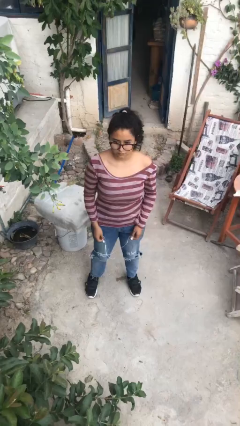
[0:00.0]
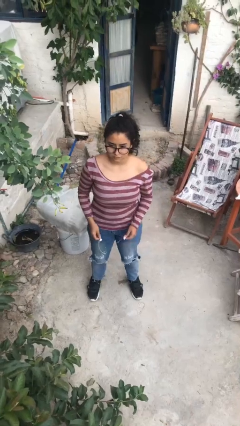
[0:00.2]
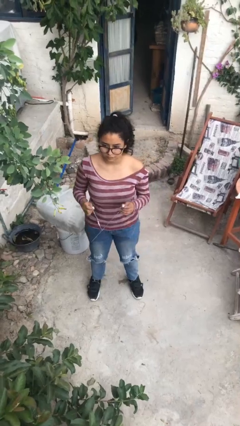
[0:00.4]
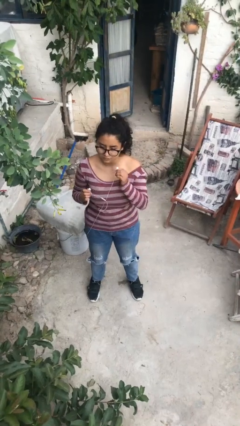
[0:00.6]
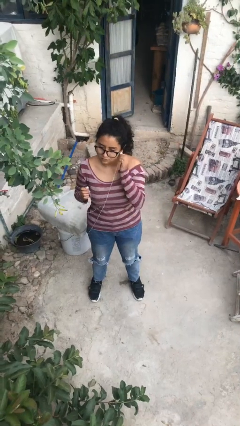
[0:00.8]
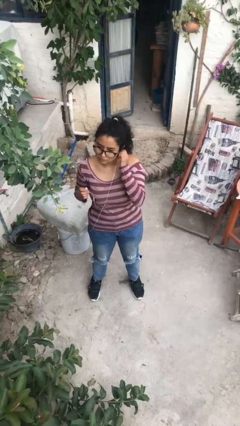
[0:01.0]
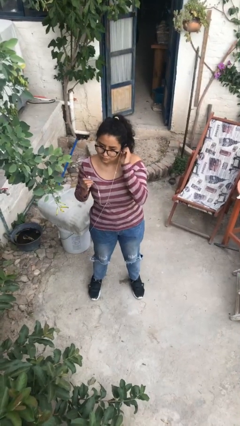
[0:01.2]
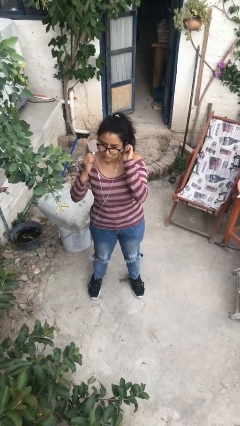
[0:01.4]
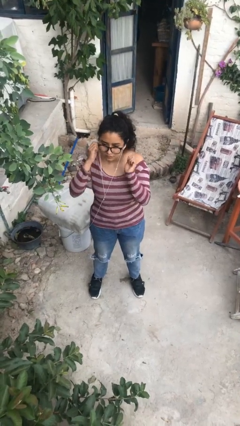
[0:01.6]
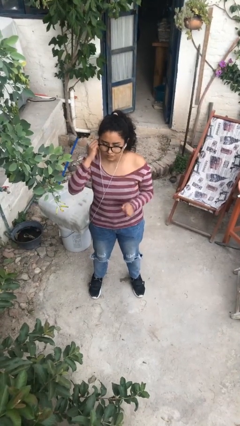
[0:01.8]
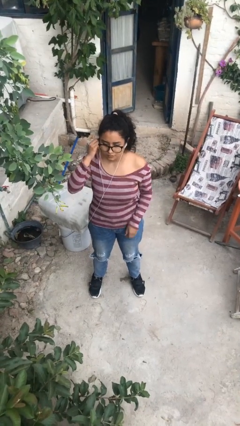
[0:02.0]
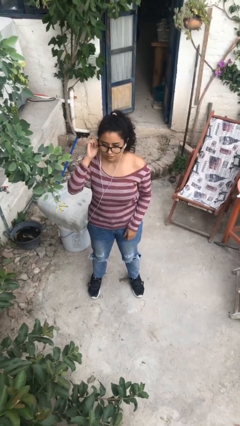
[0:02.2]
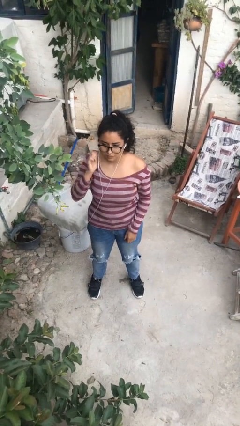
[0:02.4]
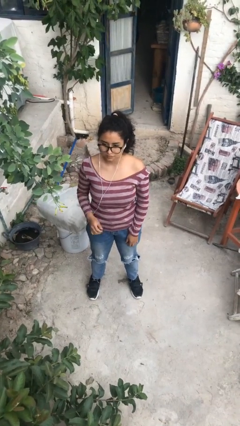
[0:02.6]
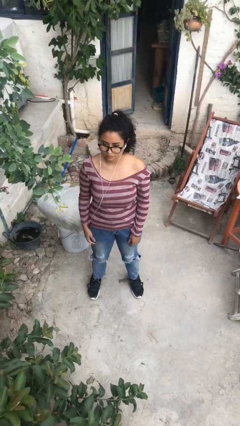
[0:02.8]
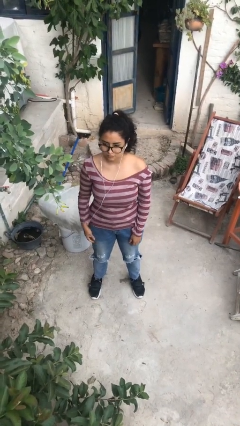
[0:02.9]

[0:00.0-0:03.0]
person puts on headphones

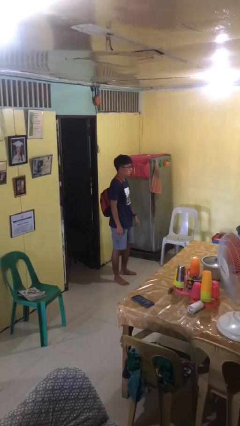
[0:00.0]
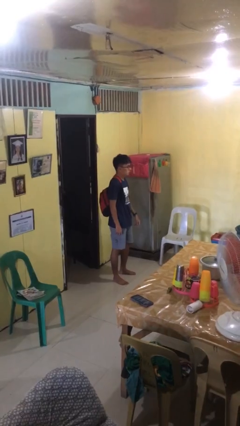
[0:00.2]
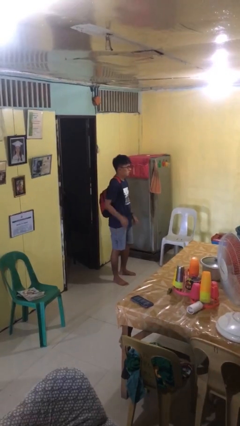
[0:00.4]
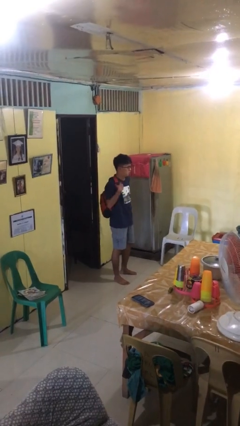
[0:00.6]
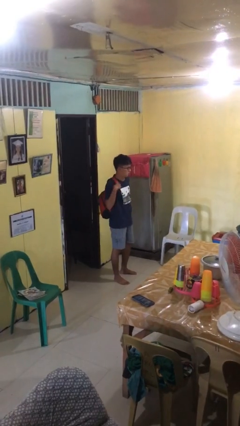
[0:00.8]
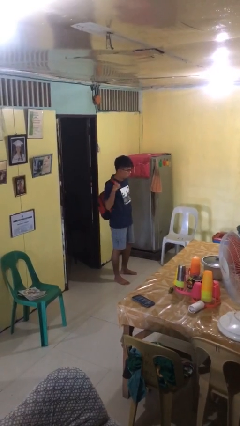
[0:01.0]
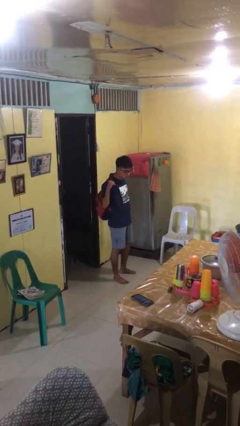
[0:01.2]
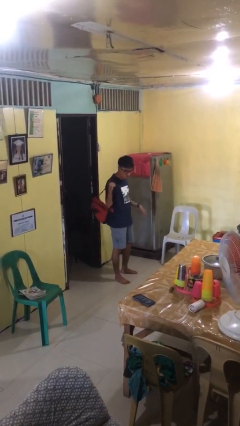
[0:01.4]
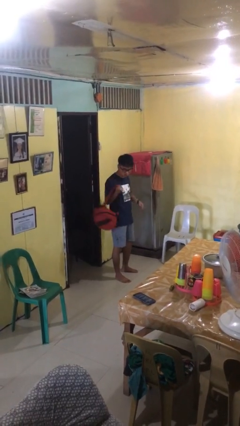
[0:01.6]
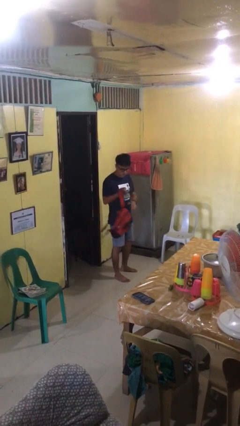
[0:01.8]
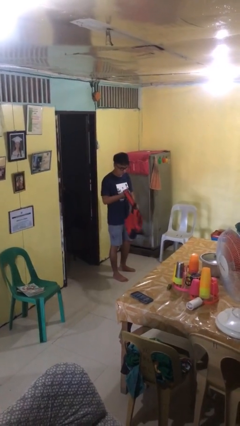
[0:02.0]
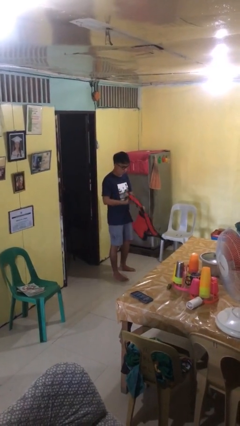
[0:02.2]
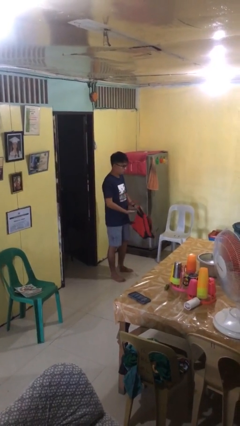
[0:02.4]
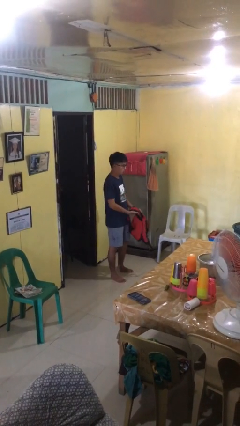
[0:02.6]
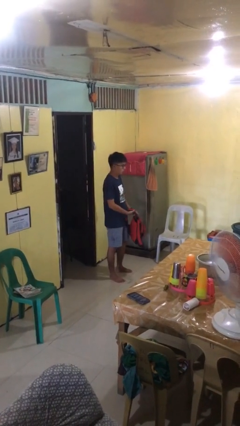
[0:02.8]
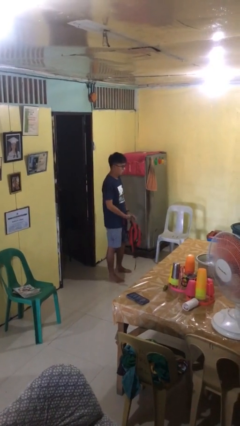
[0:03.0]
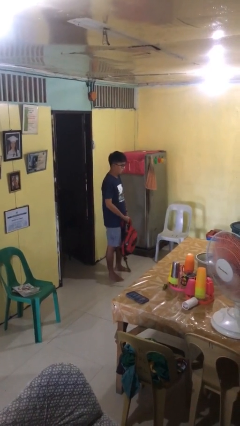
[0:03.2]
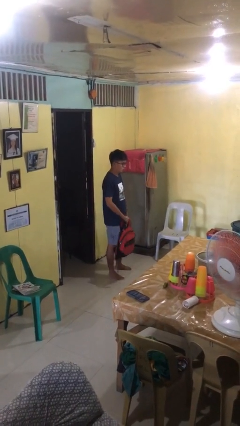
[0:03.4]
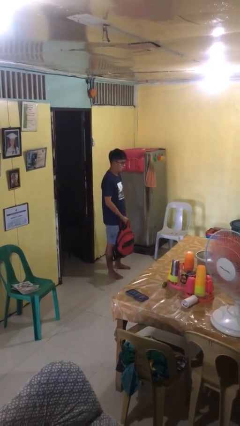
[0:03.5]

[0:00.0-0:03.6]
person takes off backpack

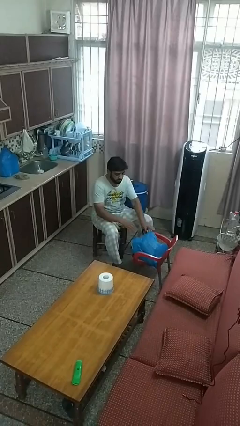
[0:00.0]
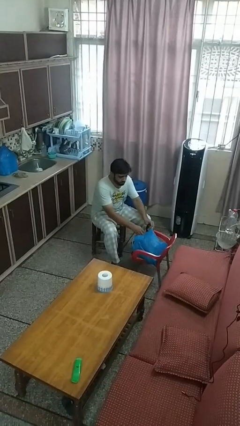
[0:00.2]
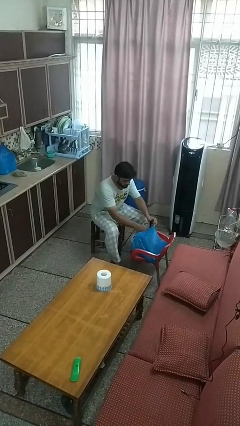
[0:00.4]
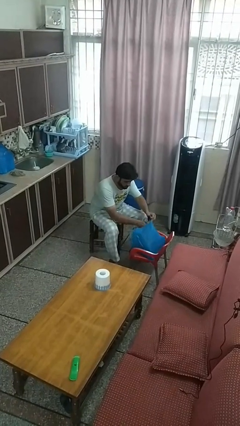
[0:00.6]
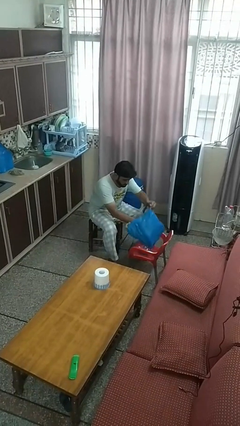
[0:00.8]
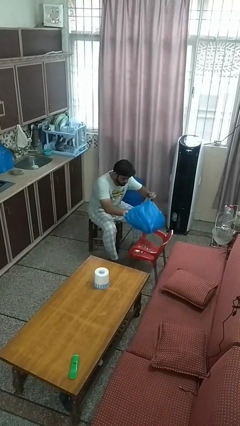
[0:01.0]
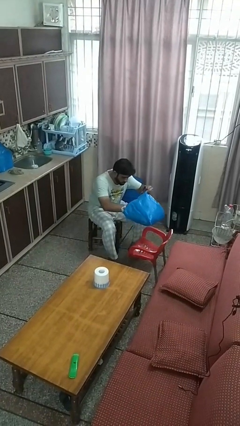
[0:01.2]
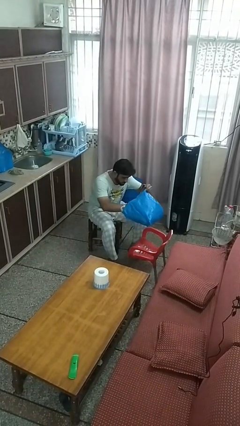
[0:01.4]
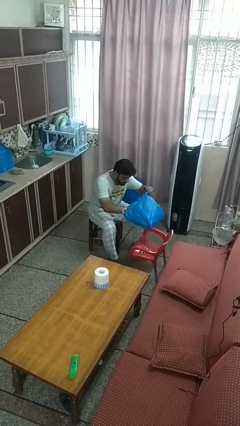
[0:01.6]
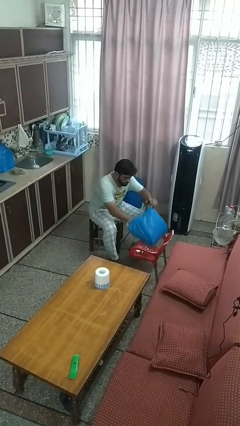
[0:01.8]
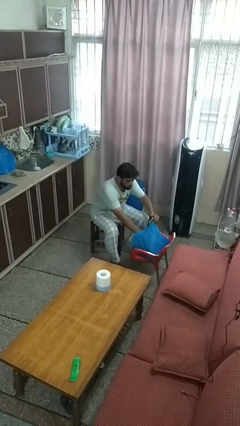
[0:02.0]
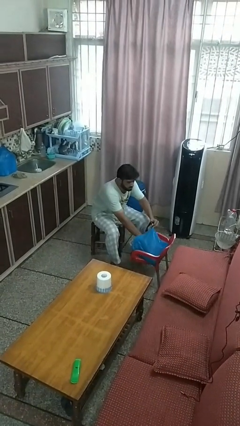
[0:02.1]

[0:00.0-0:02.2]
person searches in bag

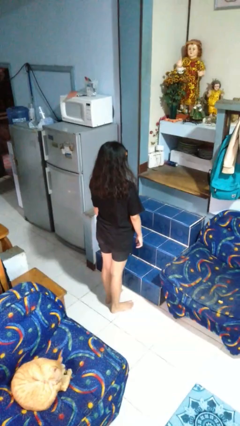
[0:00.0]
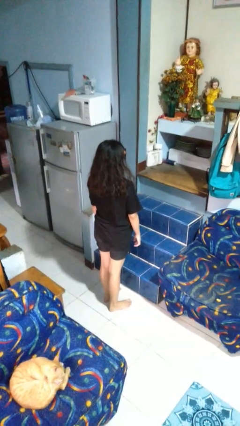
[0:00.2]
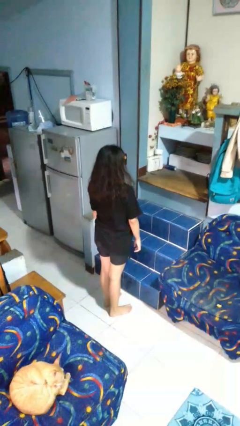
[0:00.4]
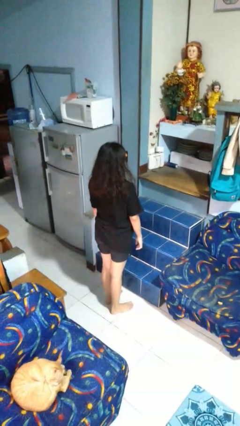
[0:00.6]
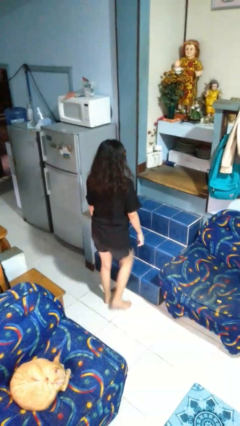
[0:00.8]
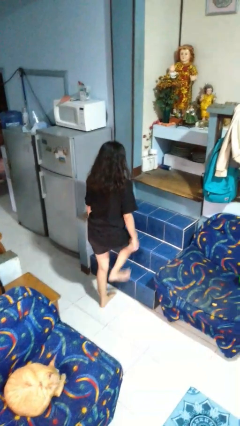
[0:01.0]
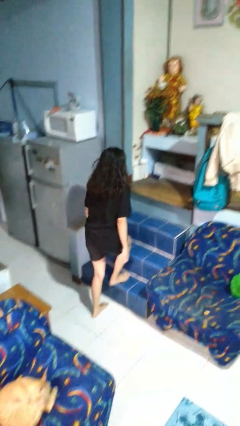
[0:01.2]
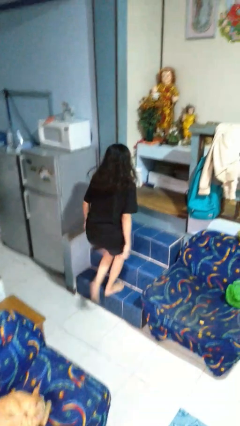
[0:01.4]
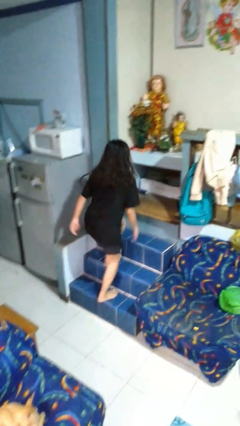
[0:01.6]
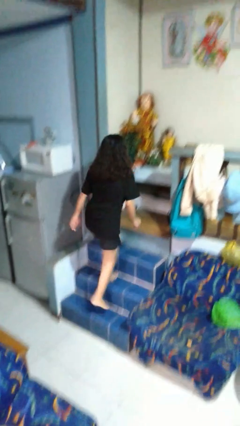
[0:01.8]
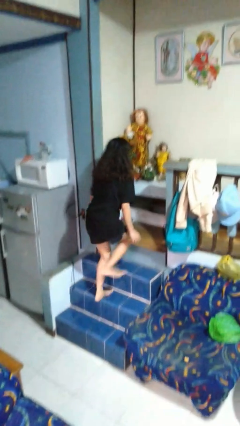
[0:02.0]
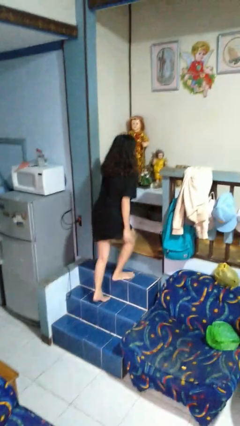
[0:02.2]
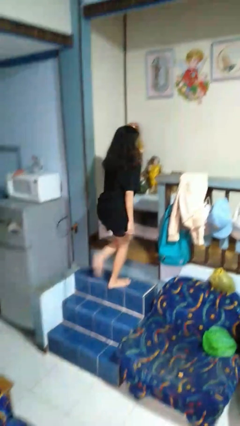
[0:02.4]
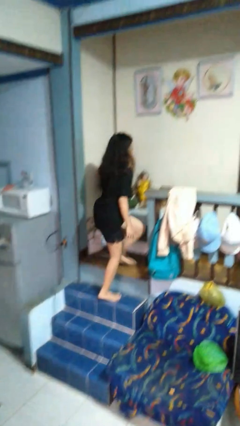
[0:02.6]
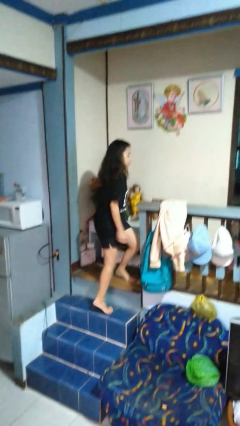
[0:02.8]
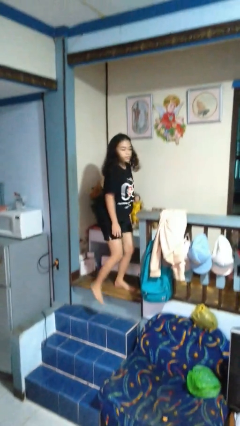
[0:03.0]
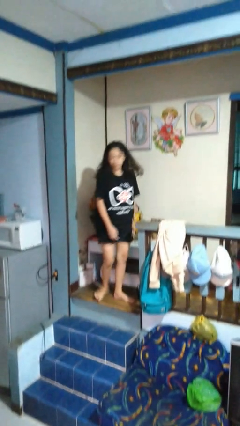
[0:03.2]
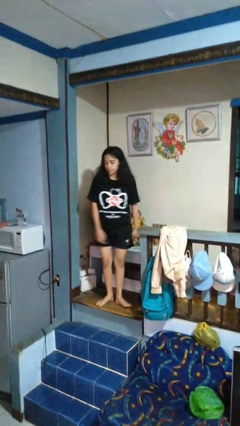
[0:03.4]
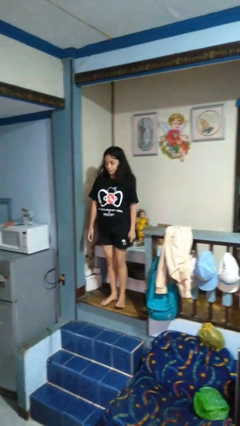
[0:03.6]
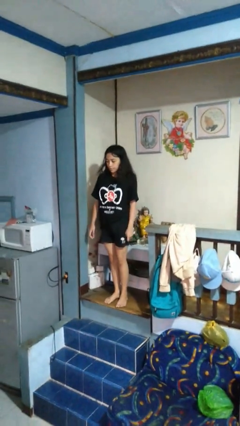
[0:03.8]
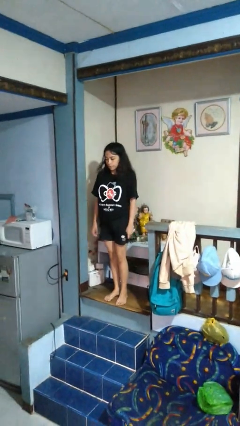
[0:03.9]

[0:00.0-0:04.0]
person climbs up stairs

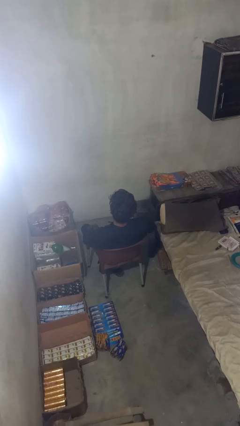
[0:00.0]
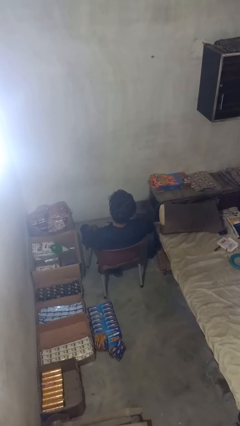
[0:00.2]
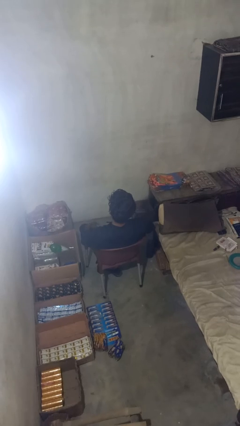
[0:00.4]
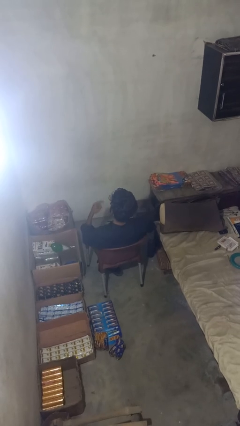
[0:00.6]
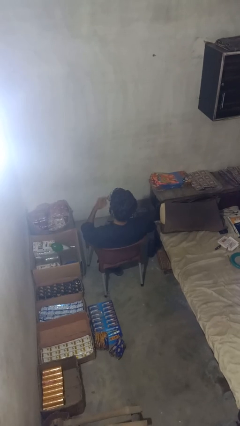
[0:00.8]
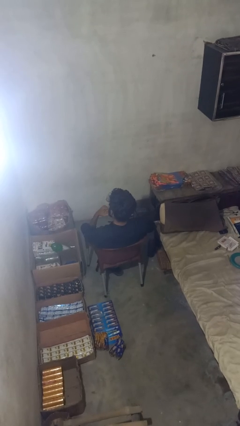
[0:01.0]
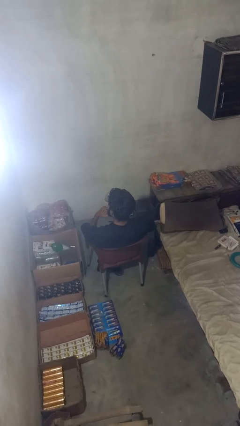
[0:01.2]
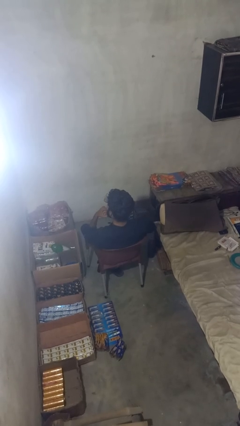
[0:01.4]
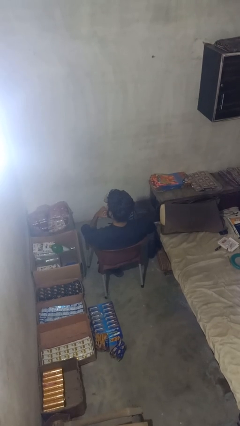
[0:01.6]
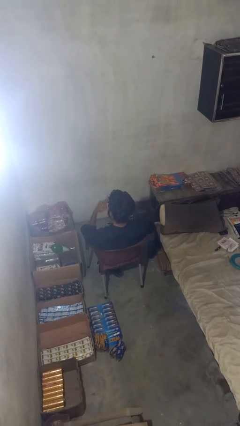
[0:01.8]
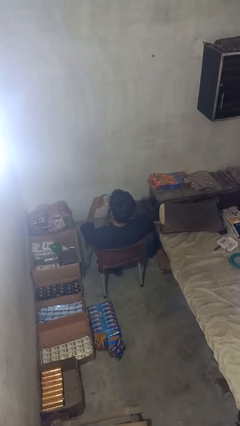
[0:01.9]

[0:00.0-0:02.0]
person licks fingers

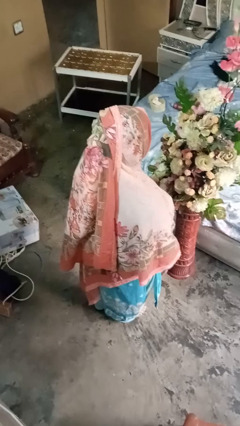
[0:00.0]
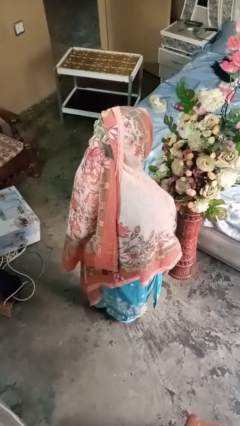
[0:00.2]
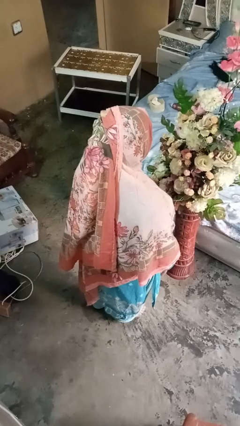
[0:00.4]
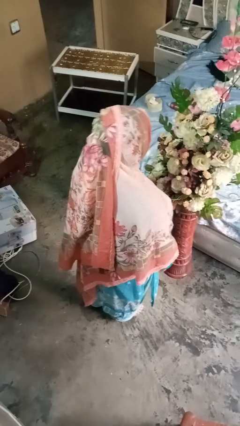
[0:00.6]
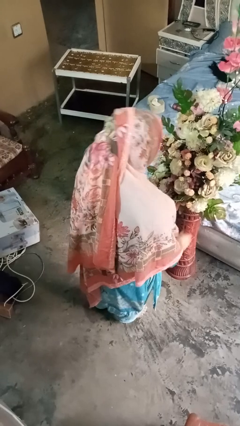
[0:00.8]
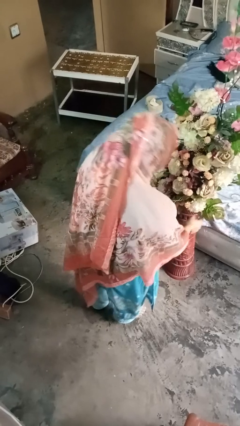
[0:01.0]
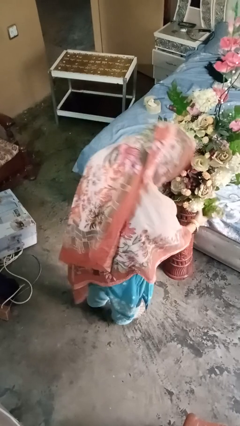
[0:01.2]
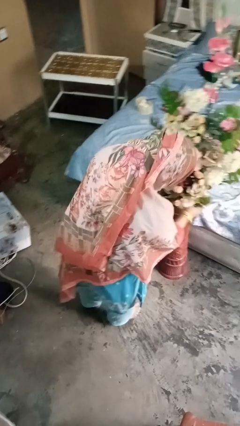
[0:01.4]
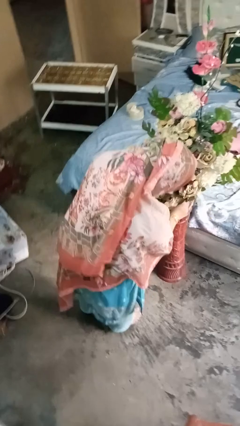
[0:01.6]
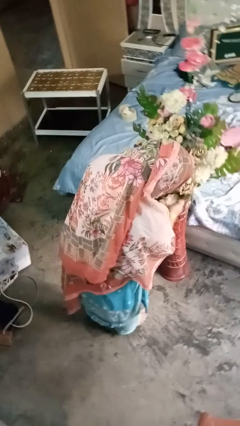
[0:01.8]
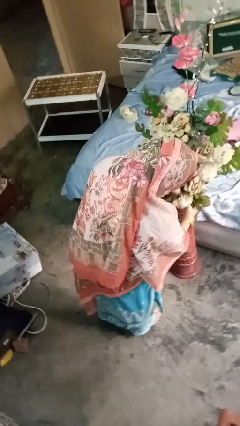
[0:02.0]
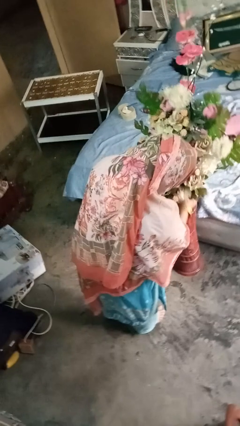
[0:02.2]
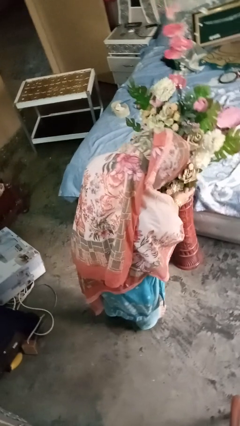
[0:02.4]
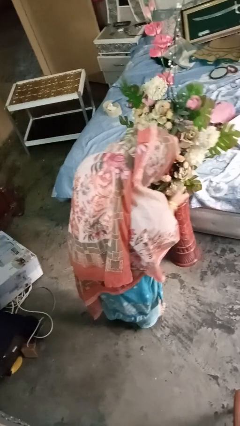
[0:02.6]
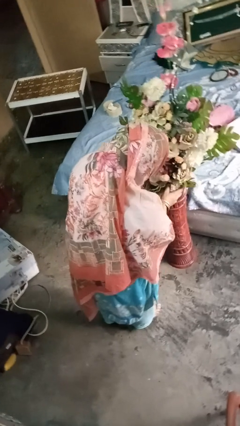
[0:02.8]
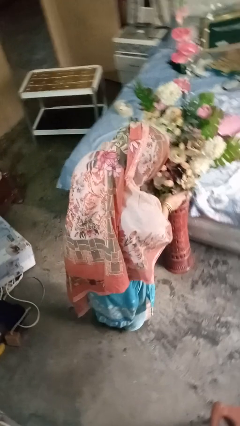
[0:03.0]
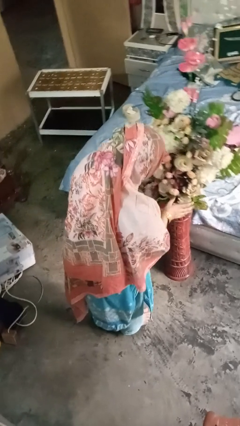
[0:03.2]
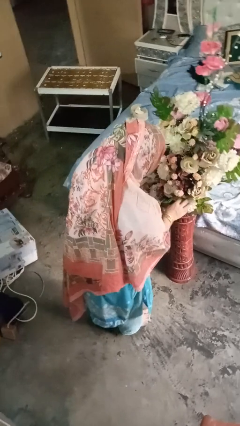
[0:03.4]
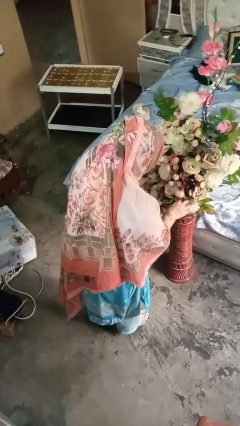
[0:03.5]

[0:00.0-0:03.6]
person arranges flowers in vase
